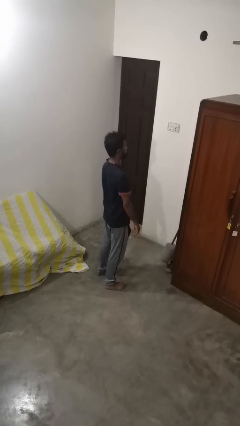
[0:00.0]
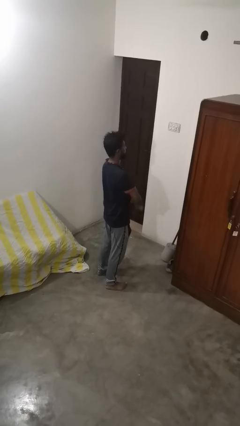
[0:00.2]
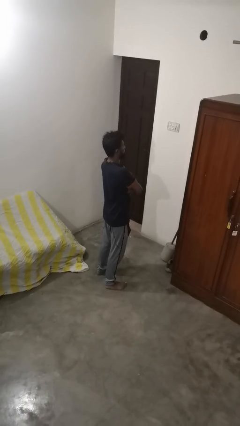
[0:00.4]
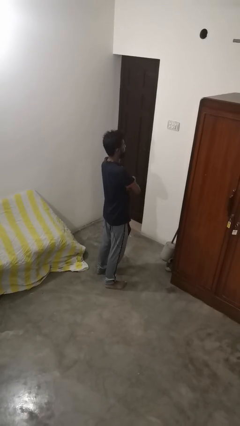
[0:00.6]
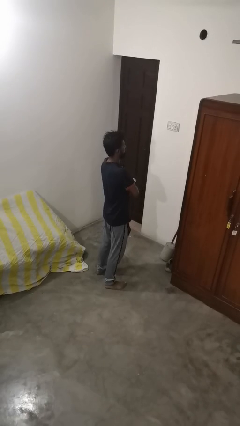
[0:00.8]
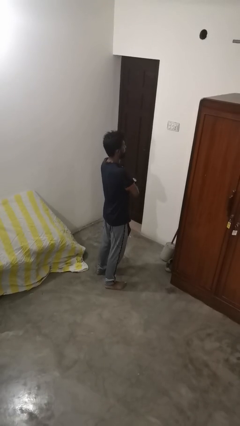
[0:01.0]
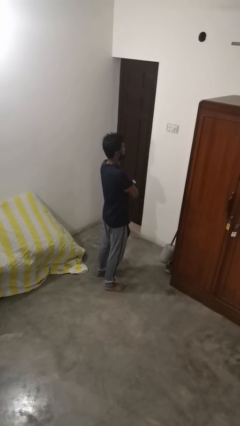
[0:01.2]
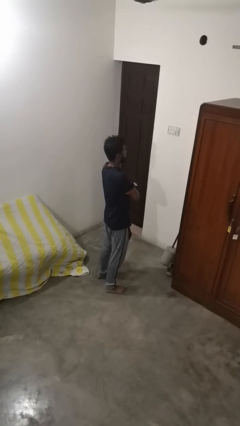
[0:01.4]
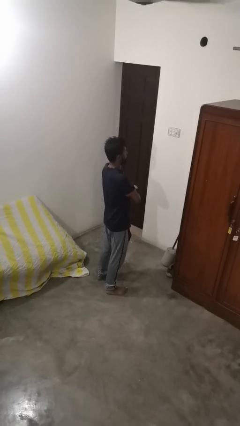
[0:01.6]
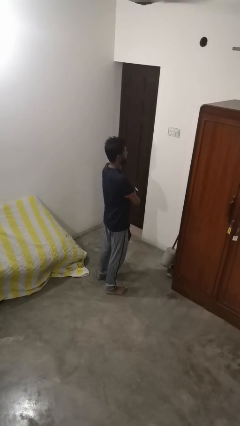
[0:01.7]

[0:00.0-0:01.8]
person crosses arms

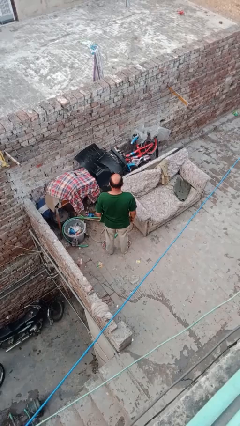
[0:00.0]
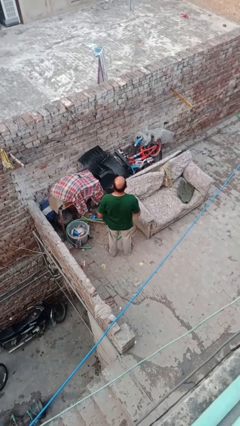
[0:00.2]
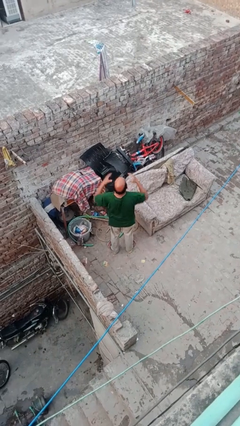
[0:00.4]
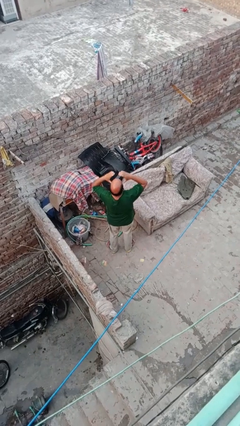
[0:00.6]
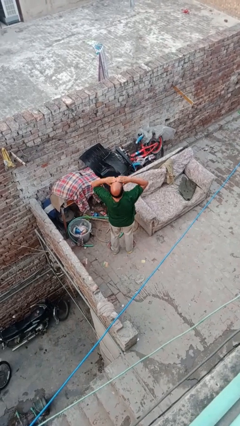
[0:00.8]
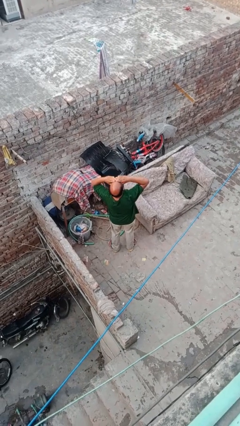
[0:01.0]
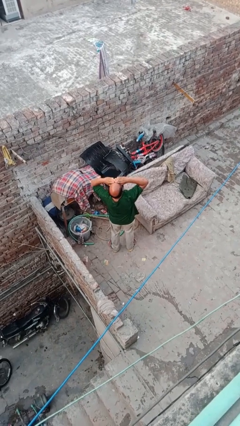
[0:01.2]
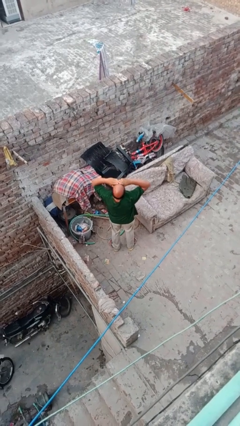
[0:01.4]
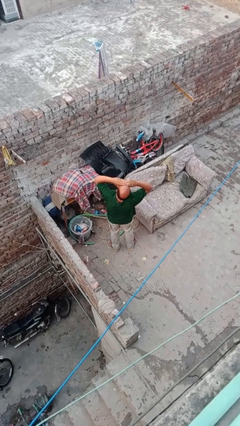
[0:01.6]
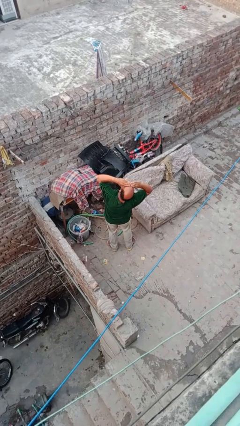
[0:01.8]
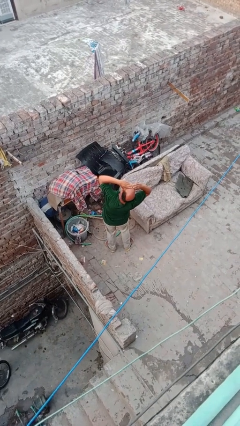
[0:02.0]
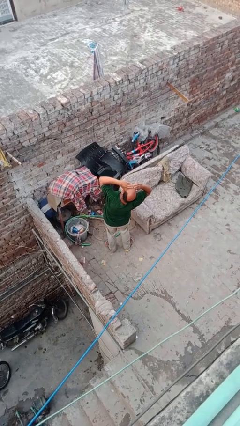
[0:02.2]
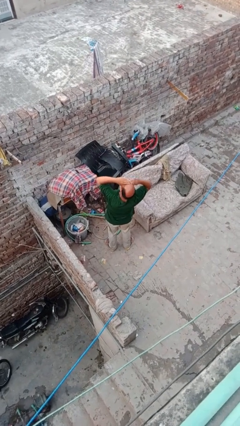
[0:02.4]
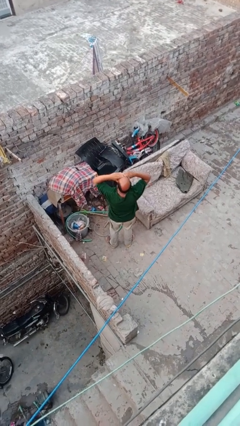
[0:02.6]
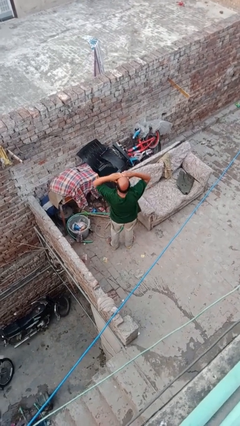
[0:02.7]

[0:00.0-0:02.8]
person shades eyes

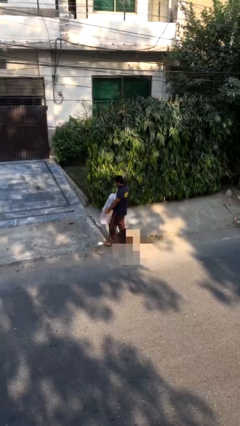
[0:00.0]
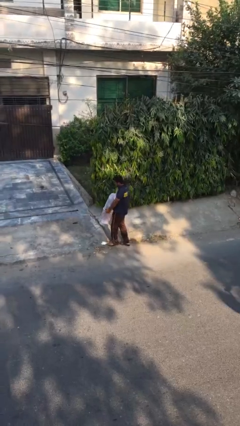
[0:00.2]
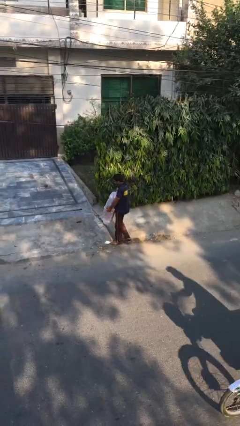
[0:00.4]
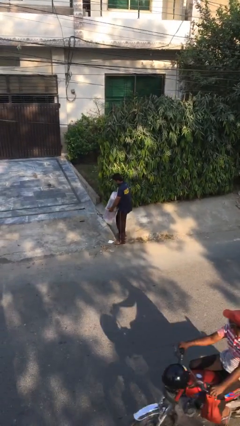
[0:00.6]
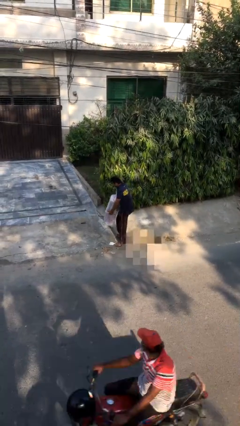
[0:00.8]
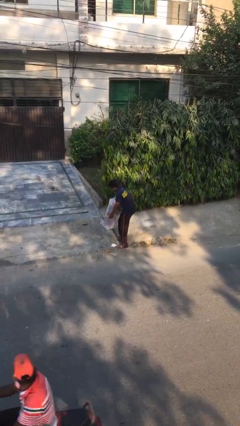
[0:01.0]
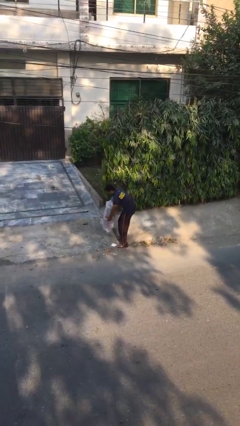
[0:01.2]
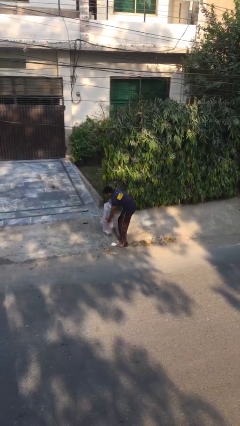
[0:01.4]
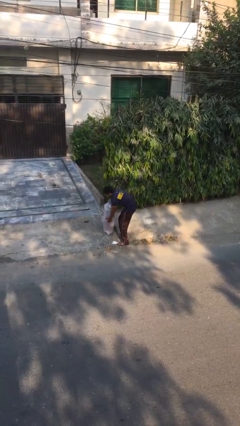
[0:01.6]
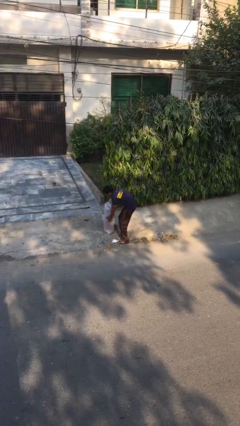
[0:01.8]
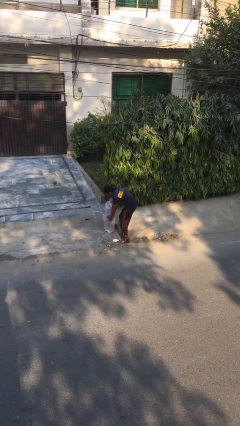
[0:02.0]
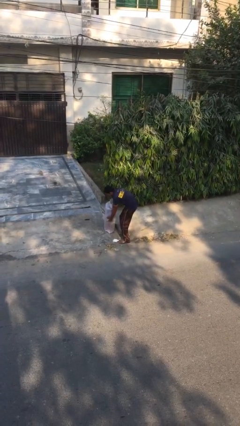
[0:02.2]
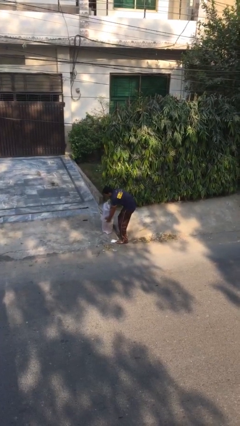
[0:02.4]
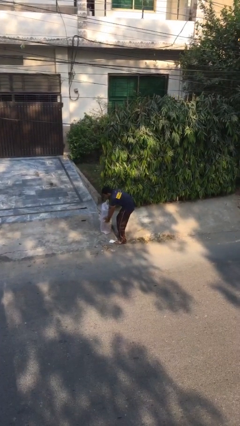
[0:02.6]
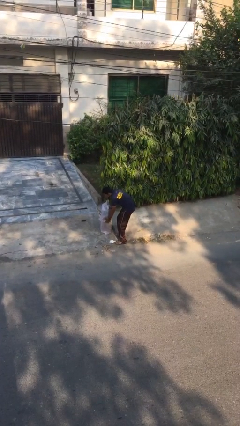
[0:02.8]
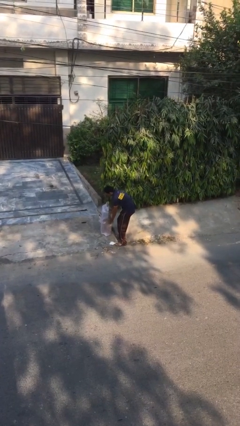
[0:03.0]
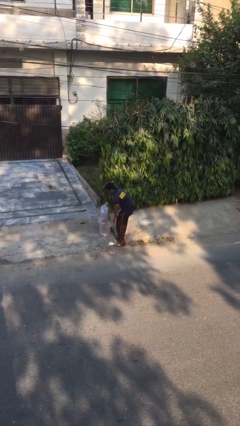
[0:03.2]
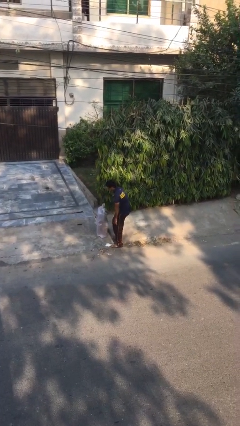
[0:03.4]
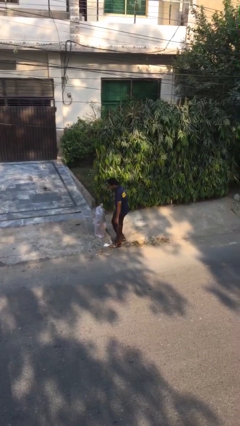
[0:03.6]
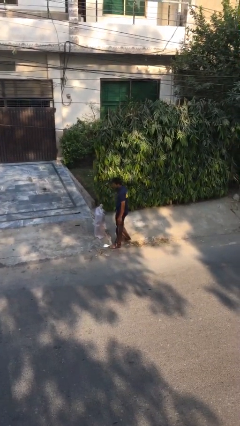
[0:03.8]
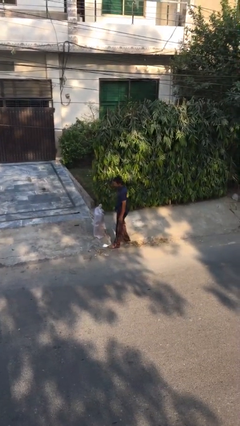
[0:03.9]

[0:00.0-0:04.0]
person puts down object on floor

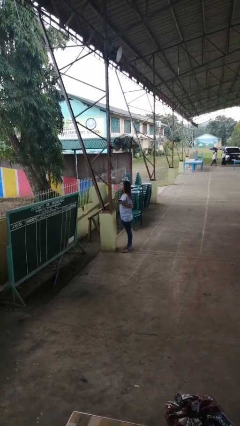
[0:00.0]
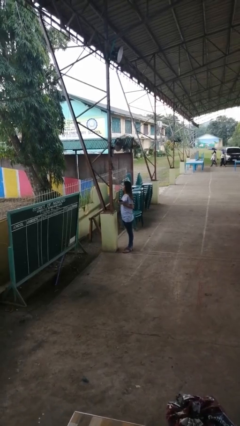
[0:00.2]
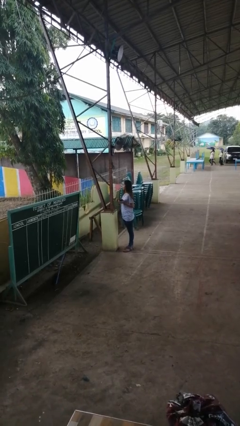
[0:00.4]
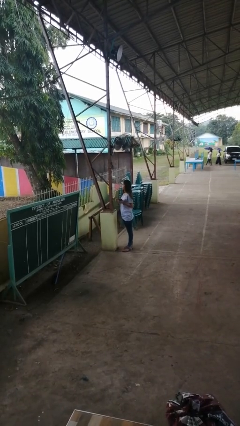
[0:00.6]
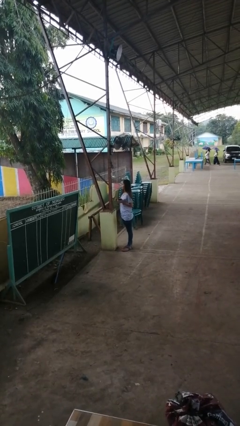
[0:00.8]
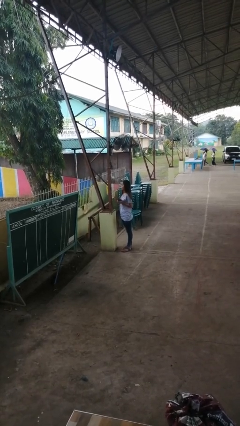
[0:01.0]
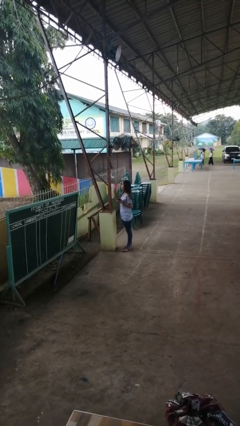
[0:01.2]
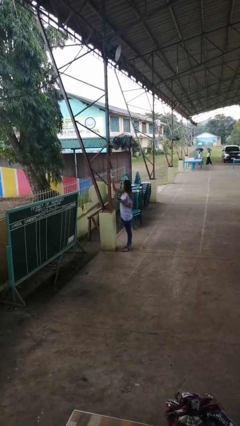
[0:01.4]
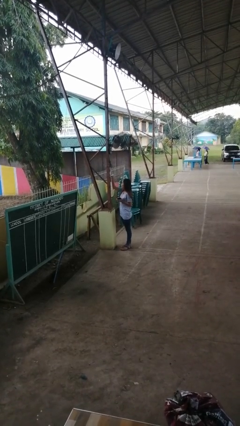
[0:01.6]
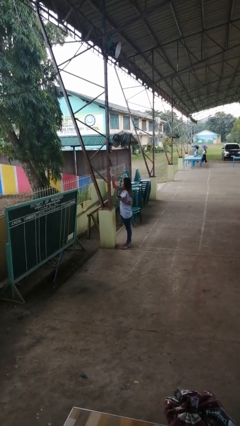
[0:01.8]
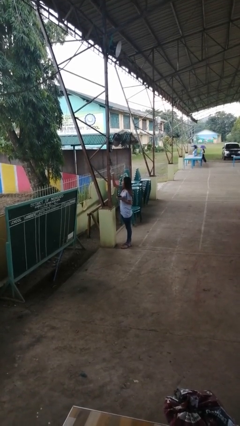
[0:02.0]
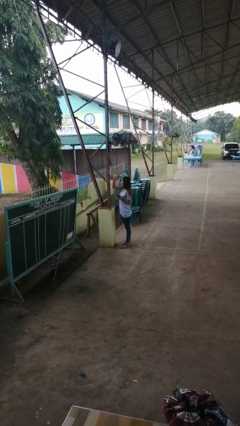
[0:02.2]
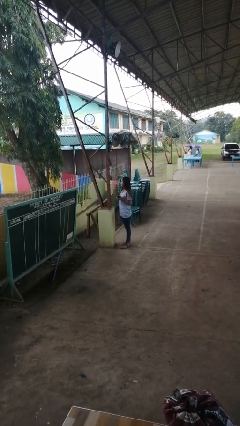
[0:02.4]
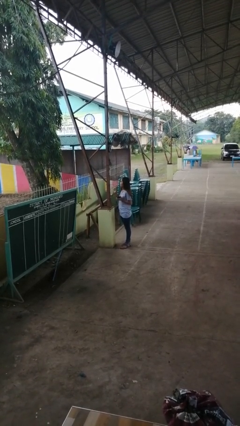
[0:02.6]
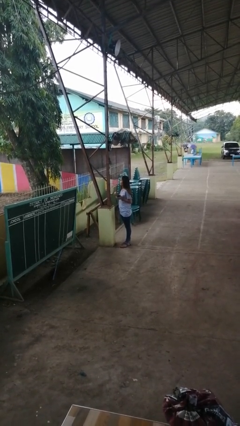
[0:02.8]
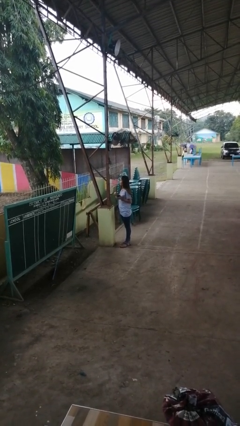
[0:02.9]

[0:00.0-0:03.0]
person unplugs from electrical socket

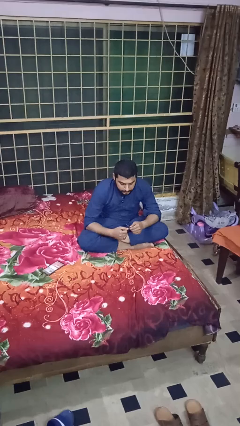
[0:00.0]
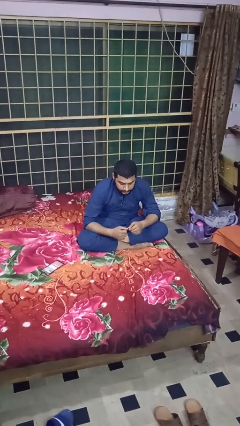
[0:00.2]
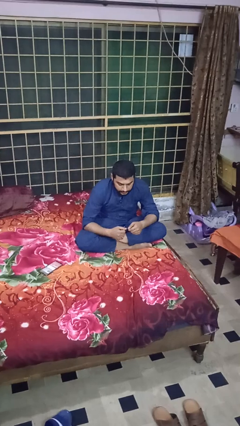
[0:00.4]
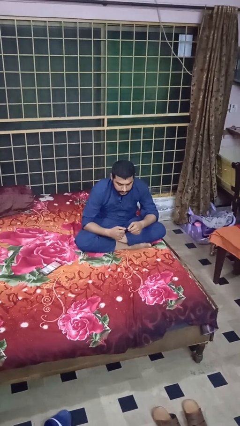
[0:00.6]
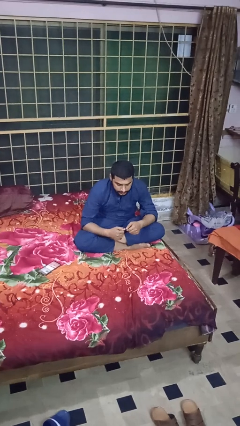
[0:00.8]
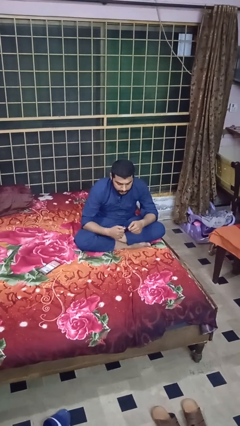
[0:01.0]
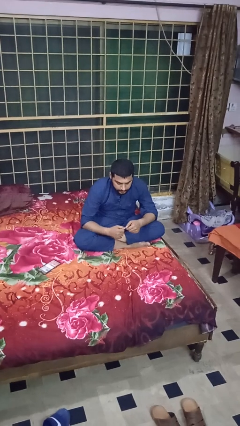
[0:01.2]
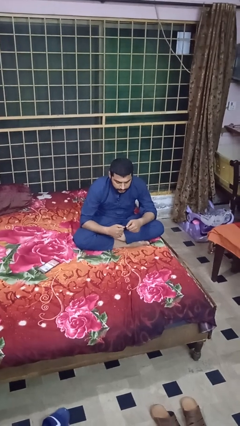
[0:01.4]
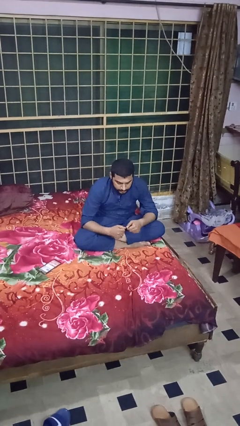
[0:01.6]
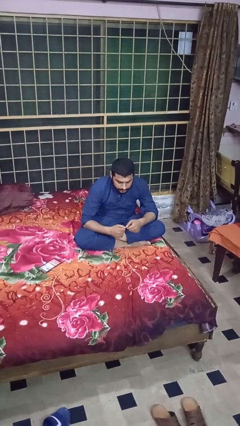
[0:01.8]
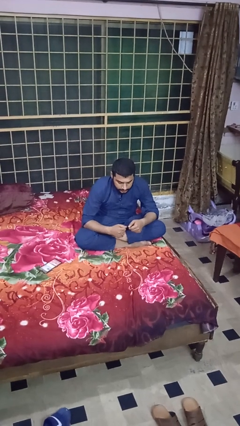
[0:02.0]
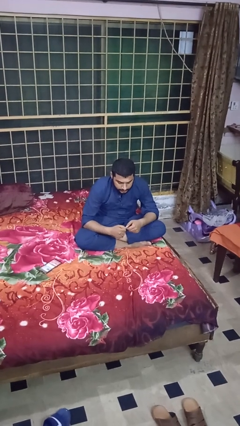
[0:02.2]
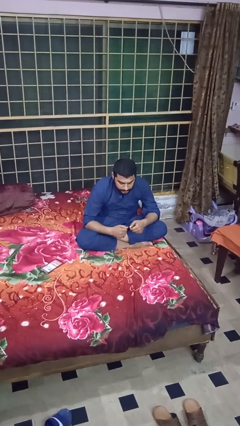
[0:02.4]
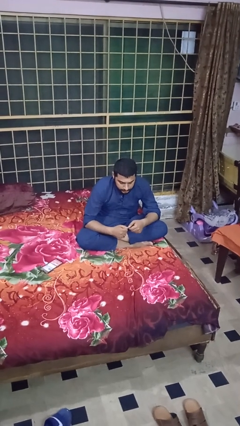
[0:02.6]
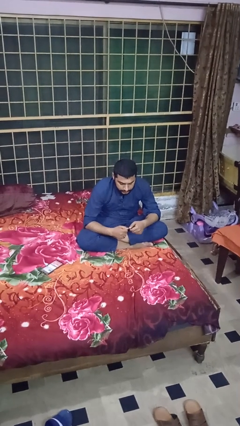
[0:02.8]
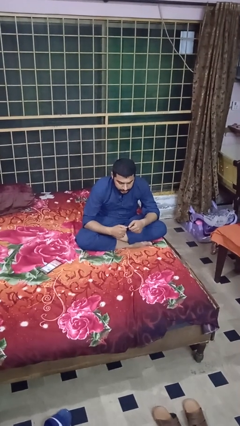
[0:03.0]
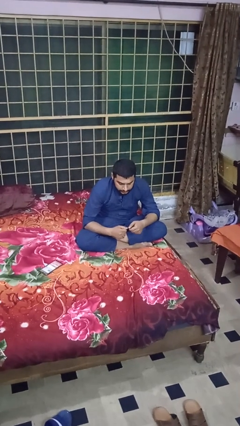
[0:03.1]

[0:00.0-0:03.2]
person files fingernails

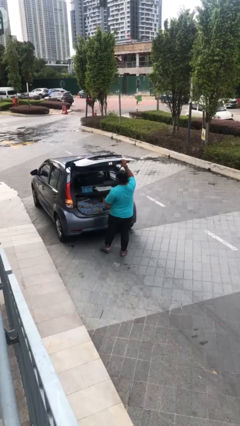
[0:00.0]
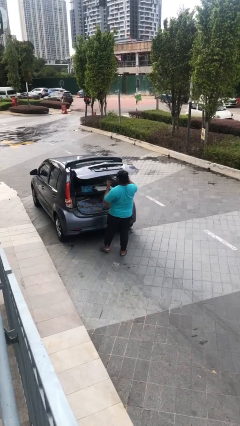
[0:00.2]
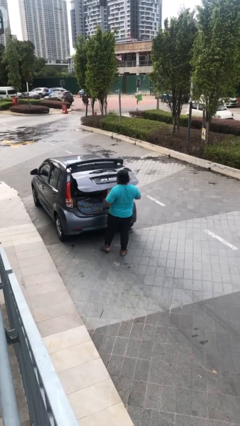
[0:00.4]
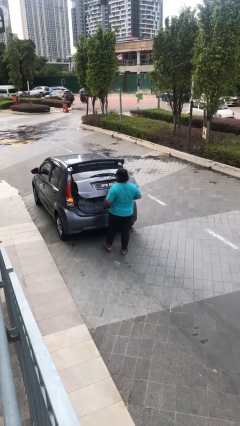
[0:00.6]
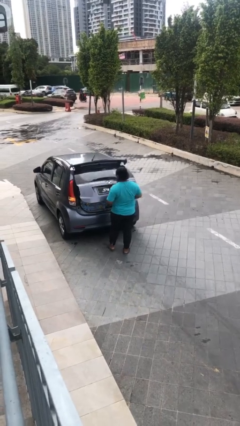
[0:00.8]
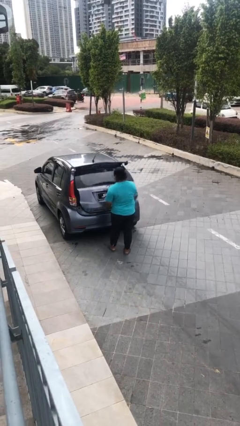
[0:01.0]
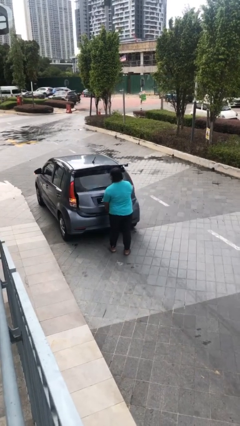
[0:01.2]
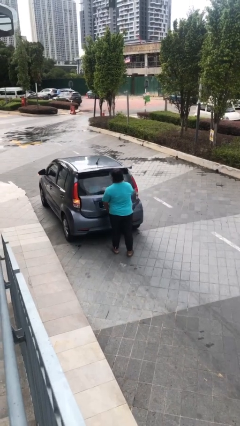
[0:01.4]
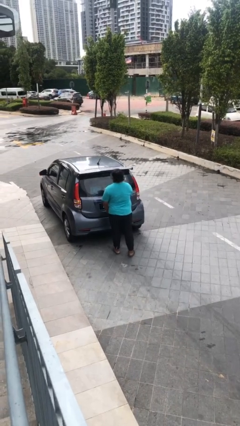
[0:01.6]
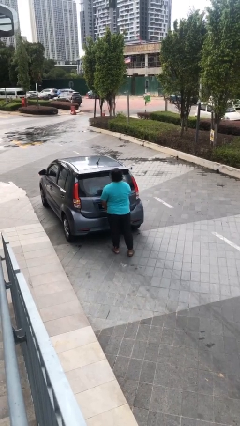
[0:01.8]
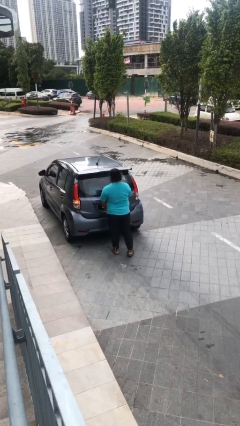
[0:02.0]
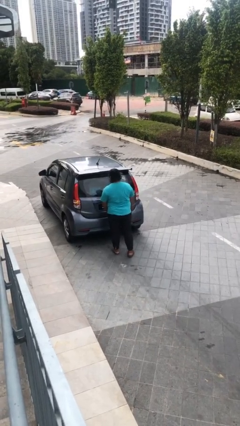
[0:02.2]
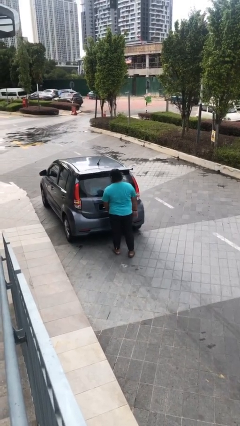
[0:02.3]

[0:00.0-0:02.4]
person closes car trunk
